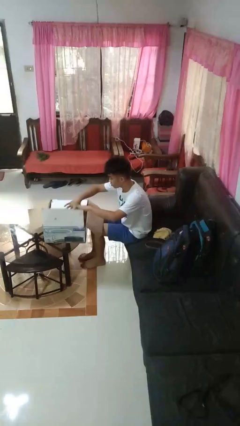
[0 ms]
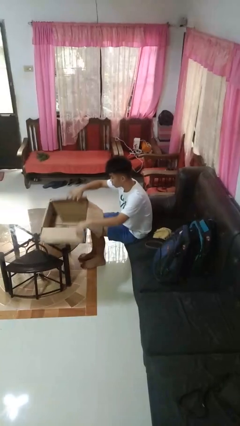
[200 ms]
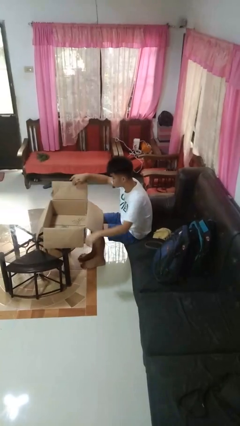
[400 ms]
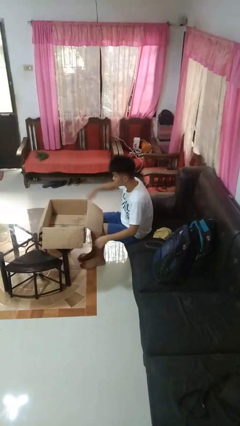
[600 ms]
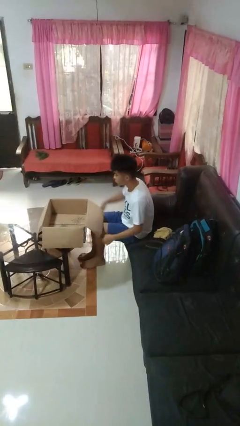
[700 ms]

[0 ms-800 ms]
person opens box

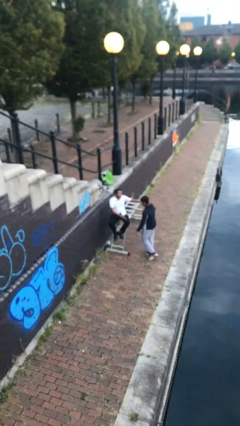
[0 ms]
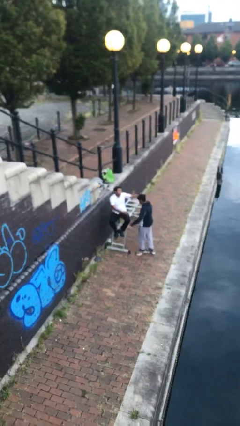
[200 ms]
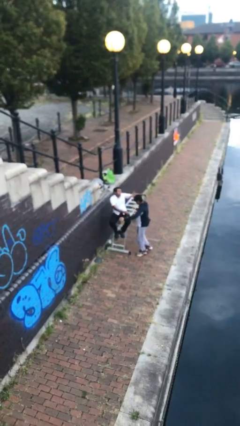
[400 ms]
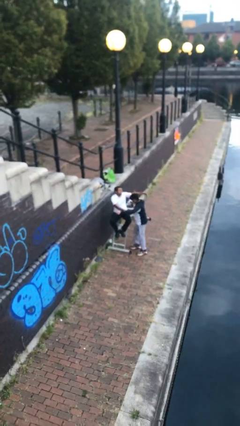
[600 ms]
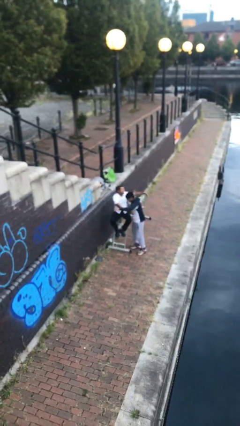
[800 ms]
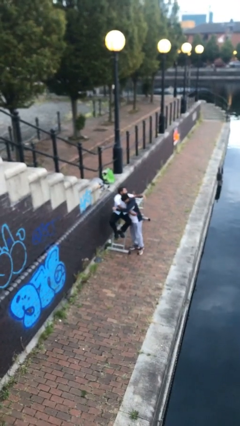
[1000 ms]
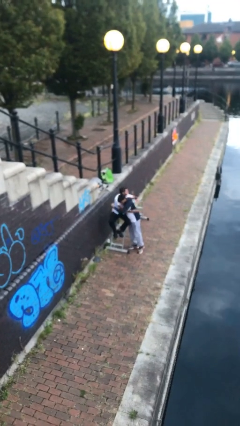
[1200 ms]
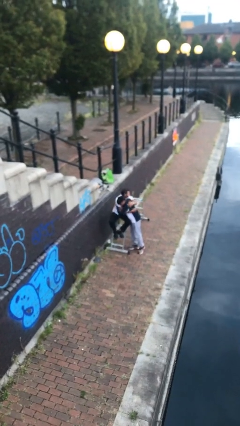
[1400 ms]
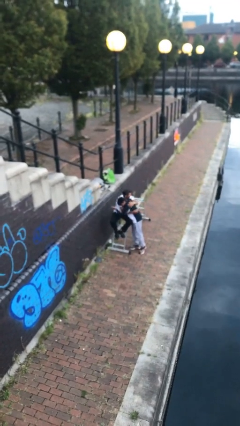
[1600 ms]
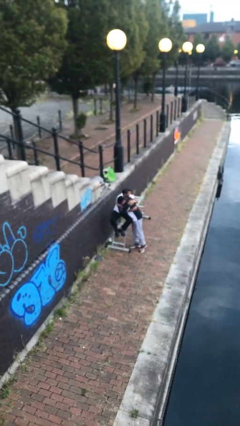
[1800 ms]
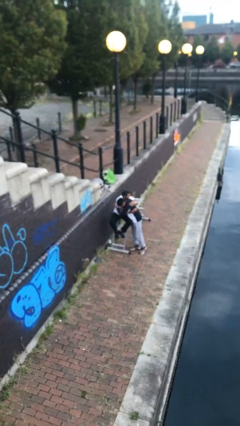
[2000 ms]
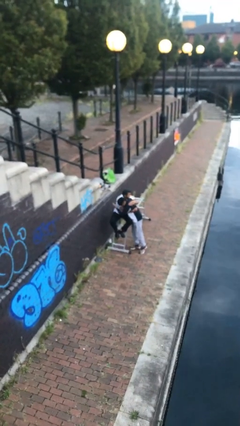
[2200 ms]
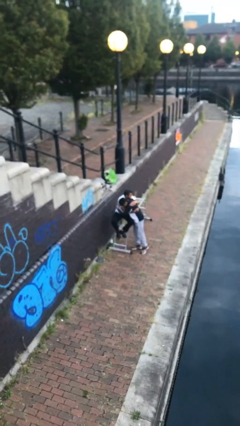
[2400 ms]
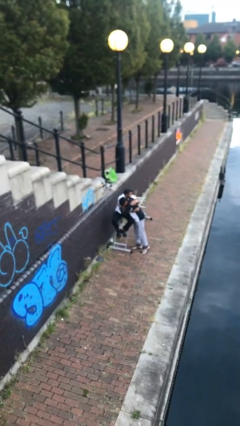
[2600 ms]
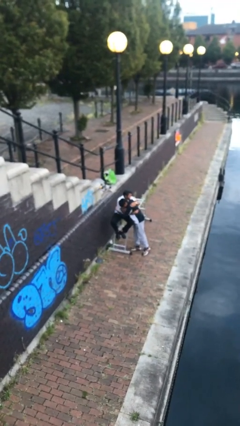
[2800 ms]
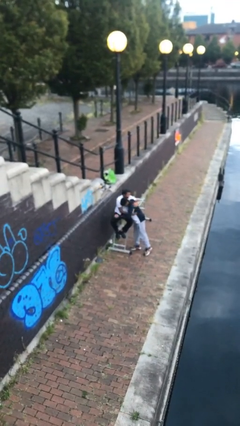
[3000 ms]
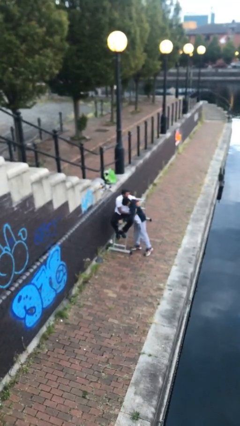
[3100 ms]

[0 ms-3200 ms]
person embraces person

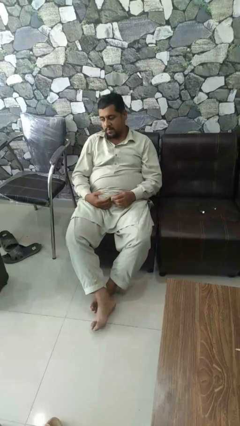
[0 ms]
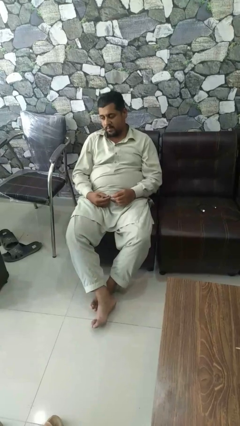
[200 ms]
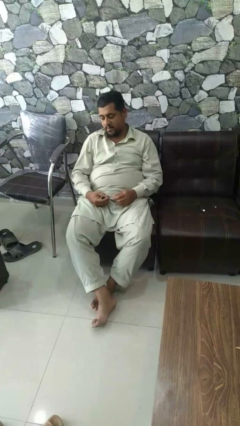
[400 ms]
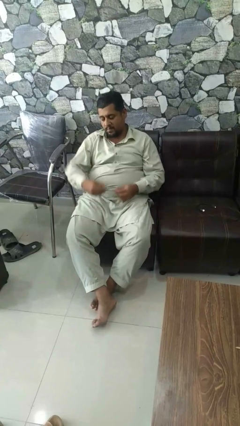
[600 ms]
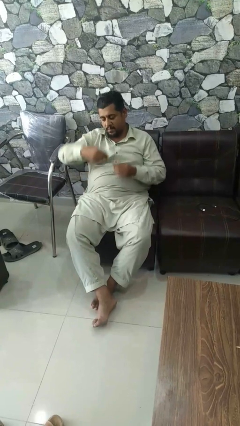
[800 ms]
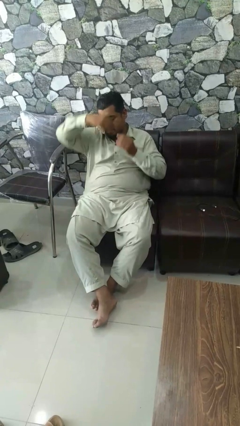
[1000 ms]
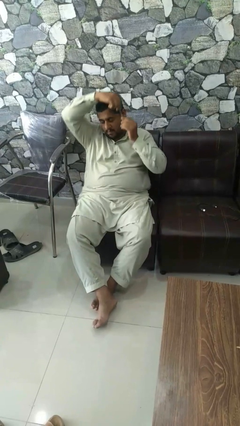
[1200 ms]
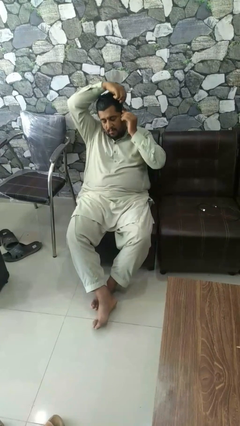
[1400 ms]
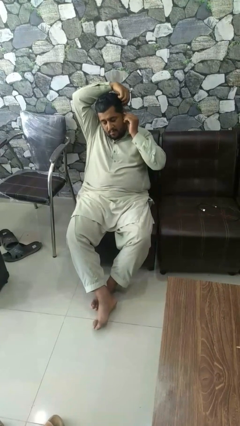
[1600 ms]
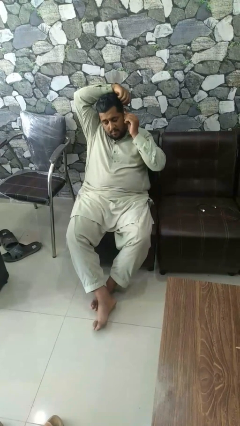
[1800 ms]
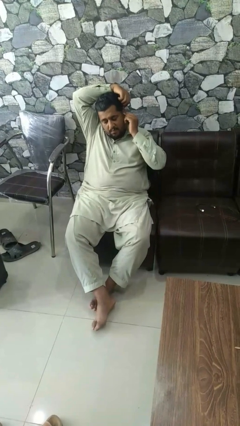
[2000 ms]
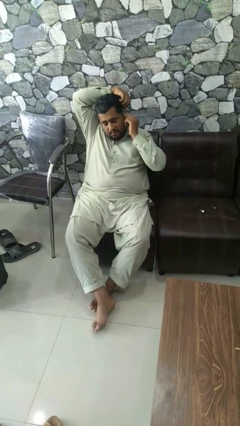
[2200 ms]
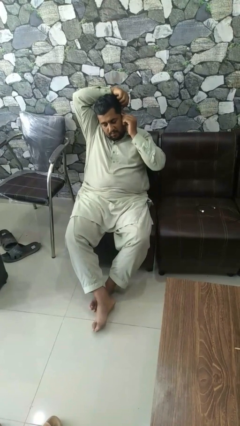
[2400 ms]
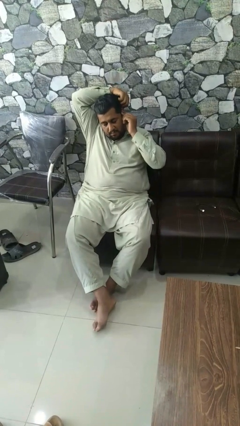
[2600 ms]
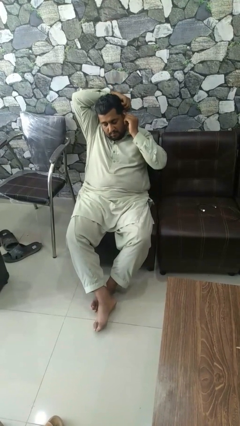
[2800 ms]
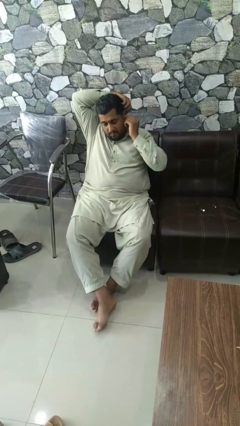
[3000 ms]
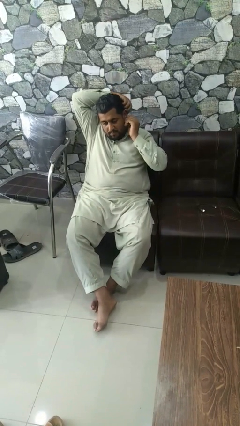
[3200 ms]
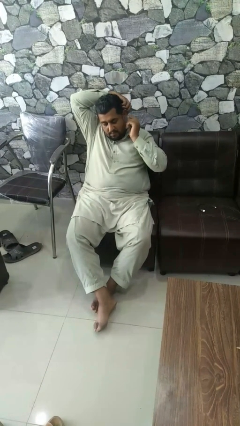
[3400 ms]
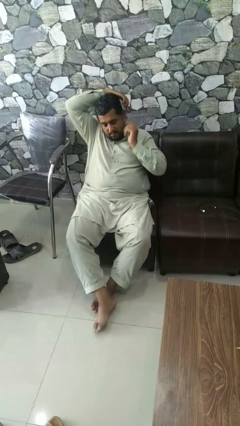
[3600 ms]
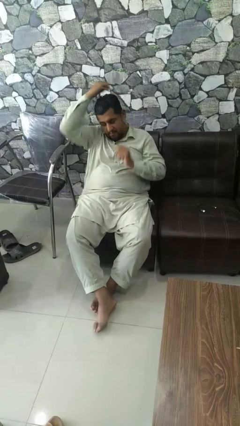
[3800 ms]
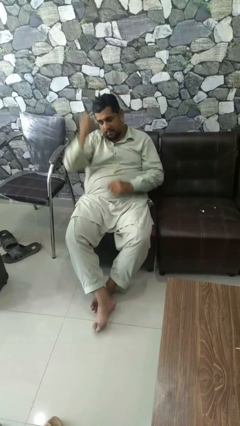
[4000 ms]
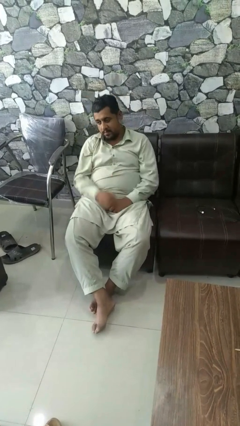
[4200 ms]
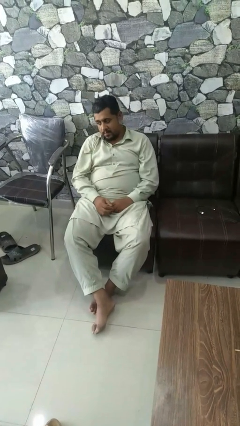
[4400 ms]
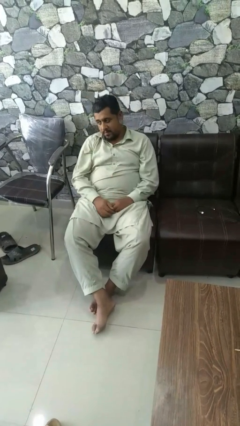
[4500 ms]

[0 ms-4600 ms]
person puts on earrings

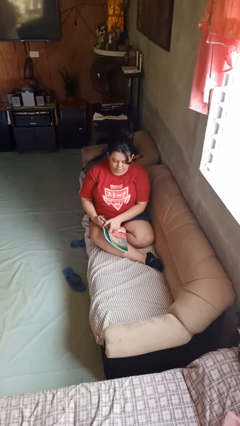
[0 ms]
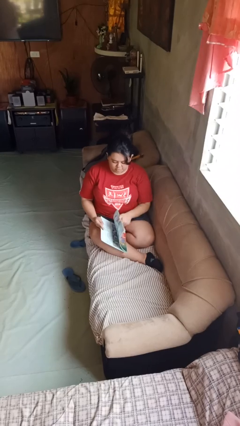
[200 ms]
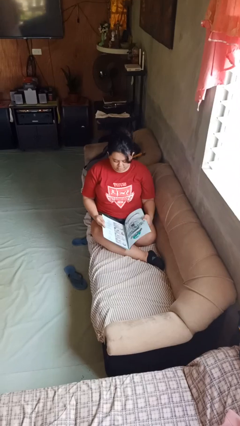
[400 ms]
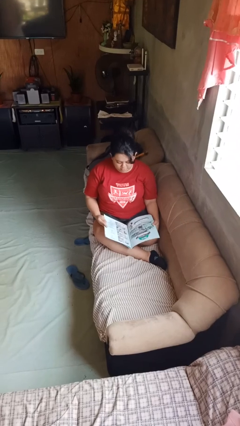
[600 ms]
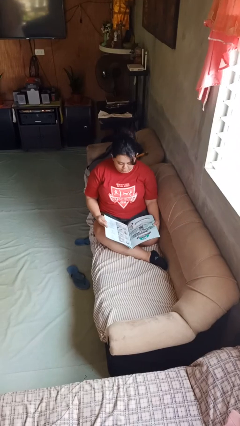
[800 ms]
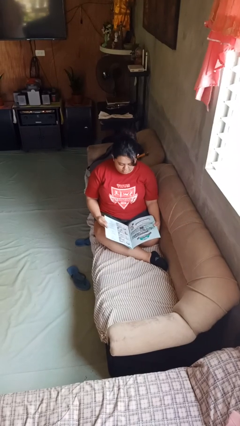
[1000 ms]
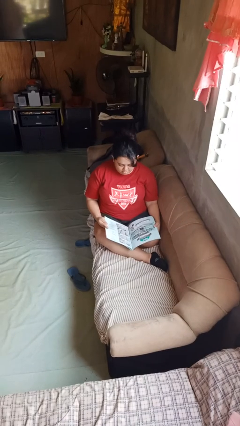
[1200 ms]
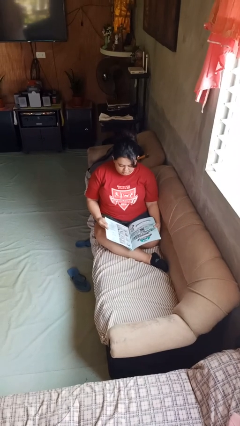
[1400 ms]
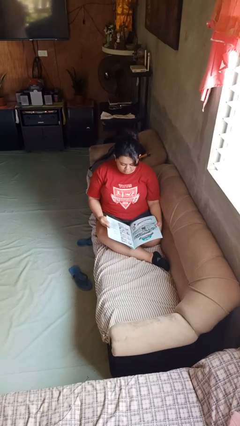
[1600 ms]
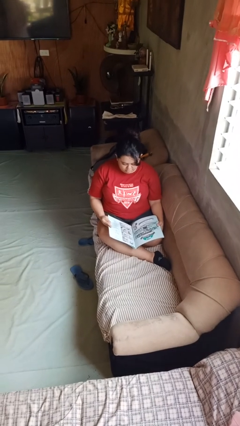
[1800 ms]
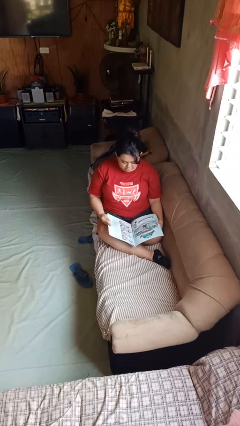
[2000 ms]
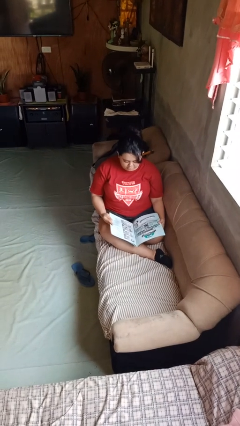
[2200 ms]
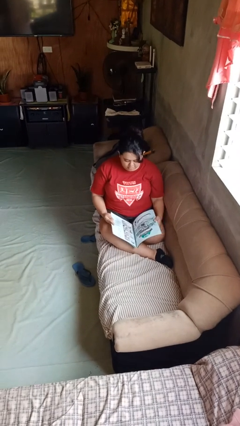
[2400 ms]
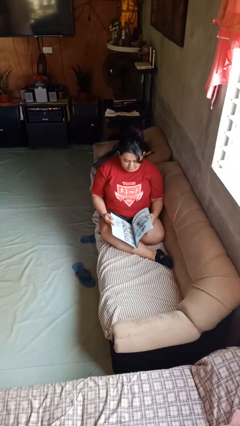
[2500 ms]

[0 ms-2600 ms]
person reads magazine

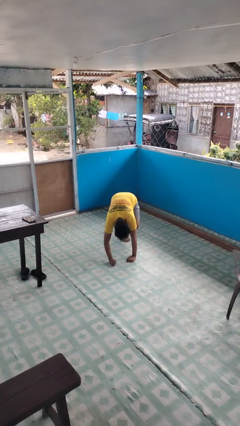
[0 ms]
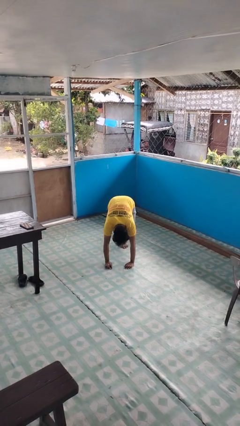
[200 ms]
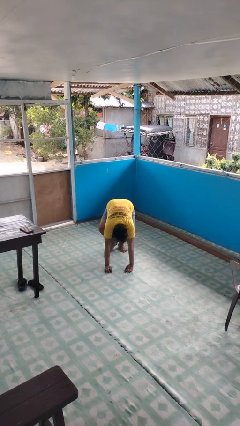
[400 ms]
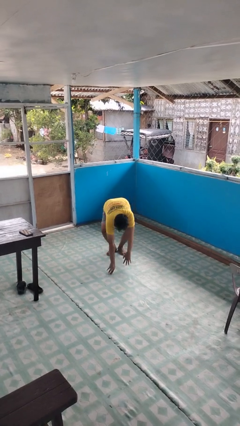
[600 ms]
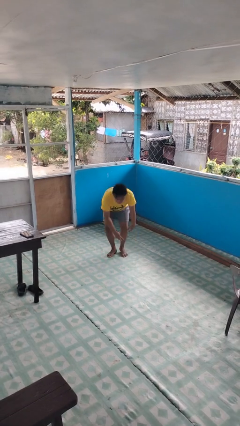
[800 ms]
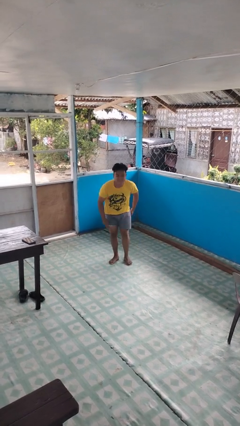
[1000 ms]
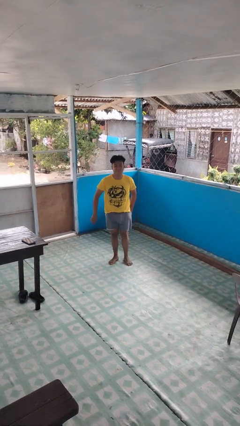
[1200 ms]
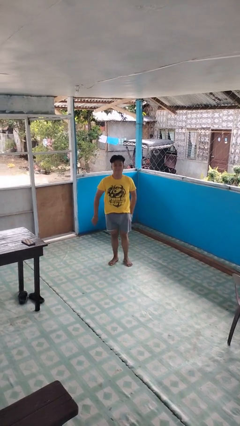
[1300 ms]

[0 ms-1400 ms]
person stands up from floor

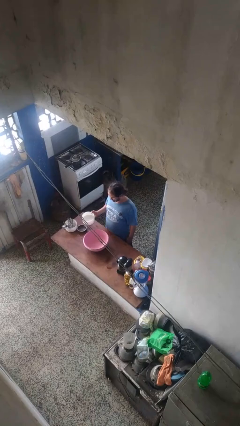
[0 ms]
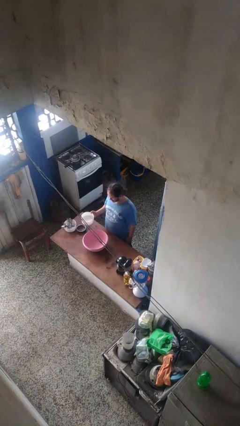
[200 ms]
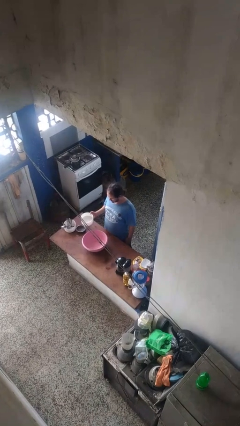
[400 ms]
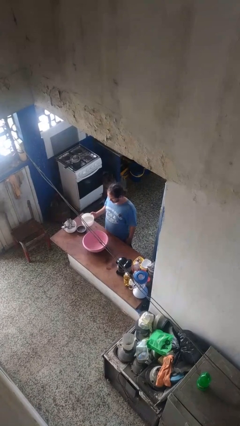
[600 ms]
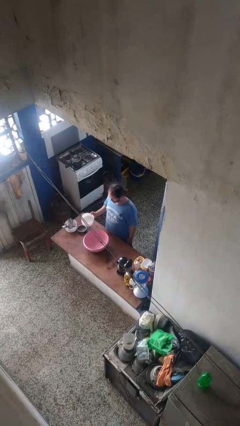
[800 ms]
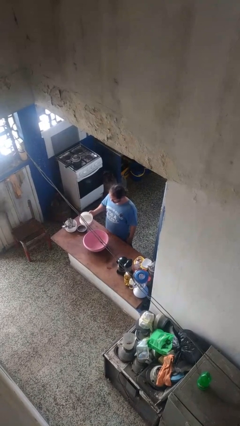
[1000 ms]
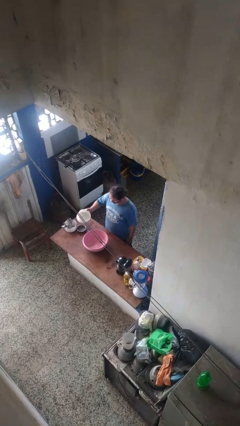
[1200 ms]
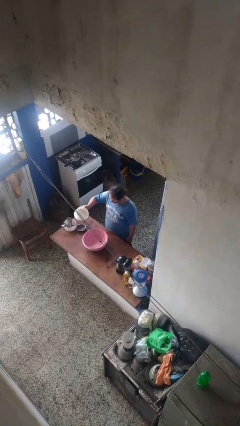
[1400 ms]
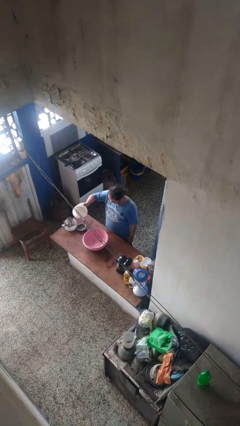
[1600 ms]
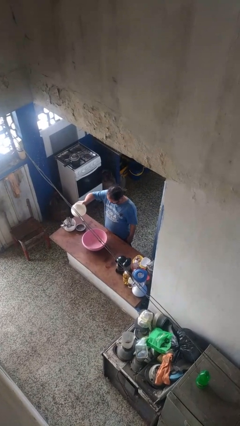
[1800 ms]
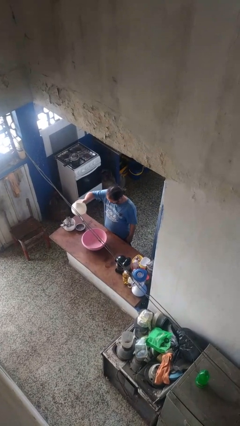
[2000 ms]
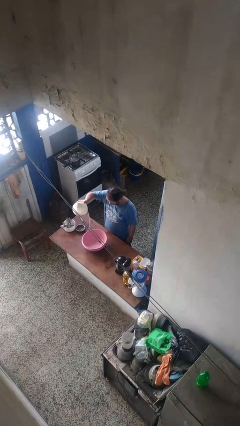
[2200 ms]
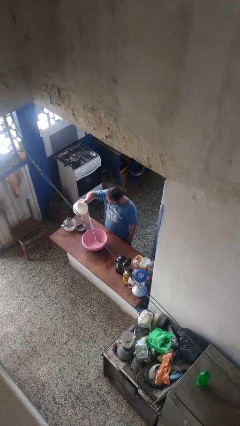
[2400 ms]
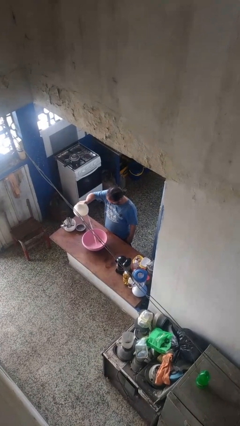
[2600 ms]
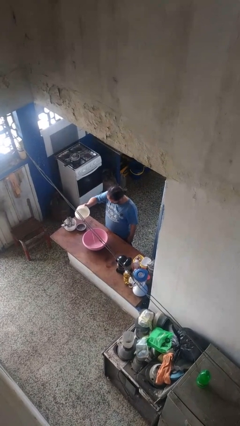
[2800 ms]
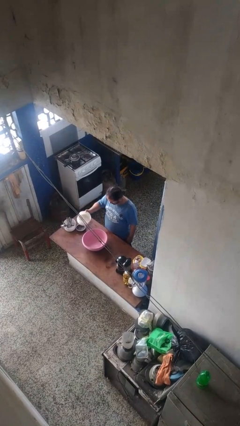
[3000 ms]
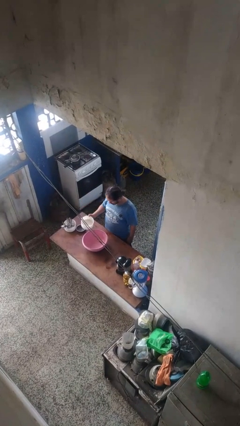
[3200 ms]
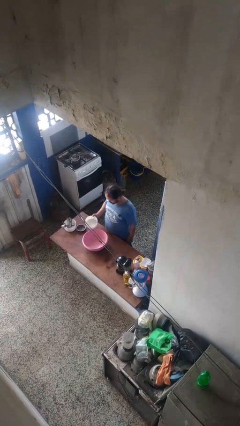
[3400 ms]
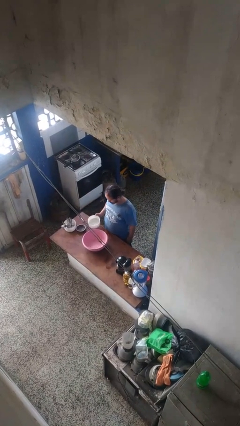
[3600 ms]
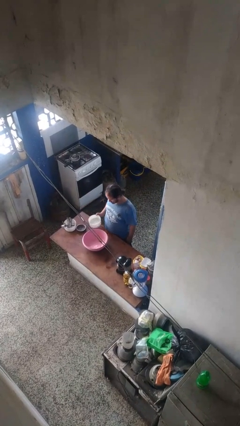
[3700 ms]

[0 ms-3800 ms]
person pours into bowl

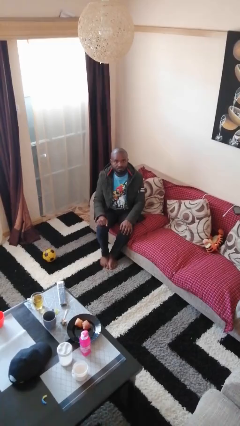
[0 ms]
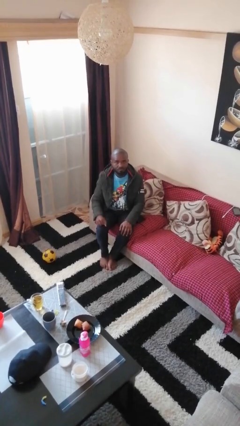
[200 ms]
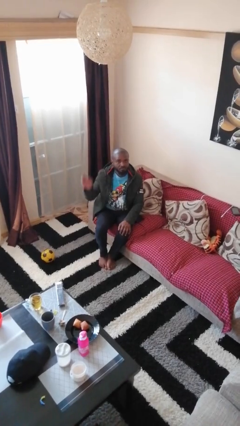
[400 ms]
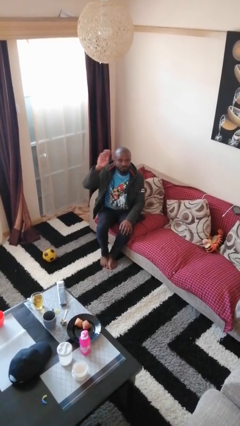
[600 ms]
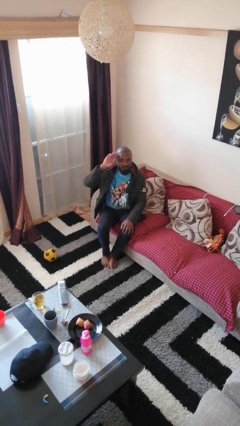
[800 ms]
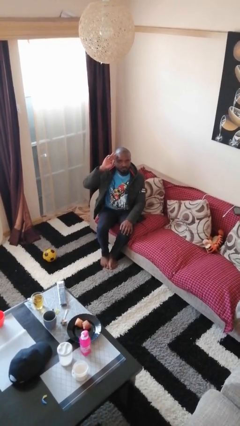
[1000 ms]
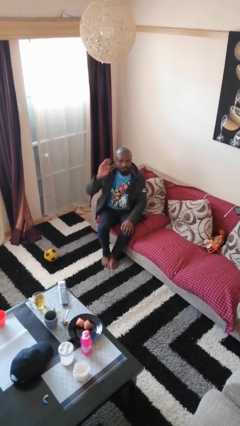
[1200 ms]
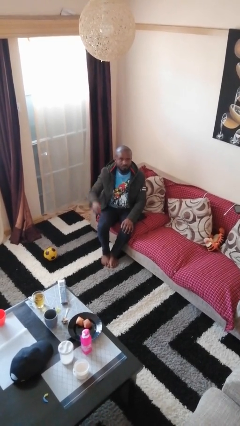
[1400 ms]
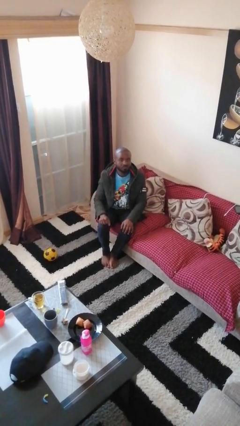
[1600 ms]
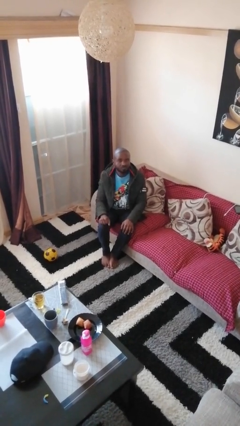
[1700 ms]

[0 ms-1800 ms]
person salutes
